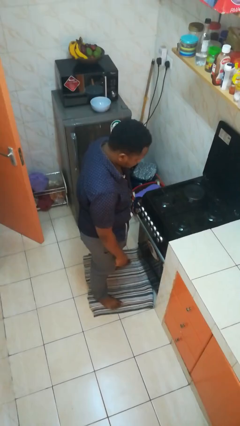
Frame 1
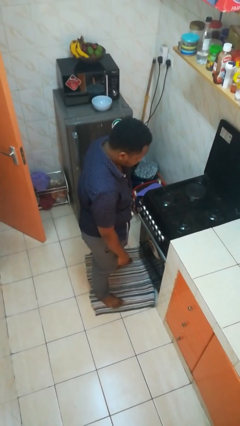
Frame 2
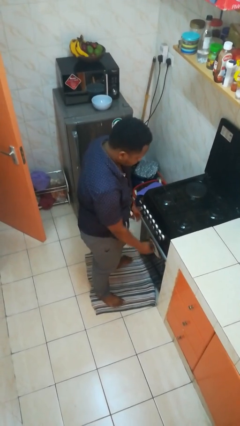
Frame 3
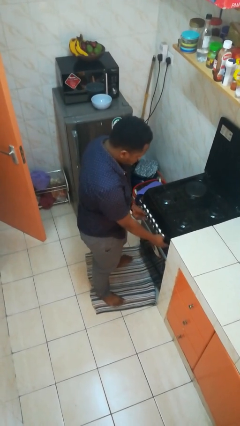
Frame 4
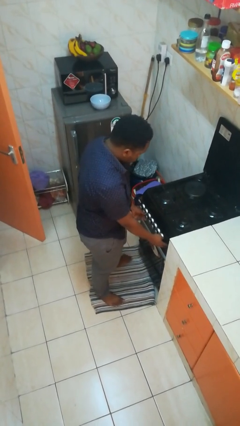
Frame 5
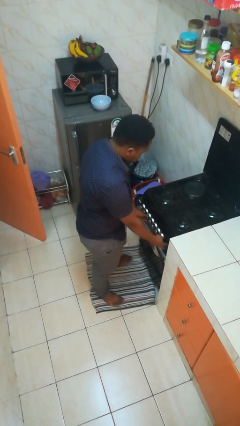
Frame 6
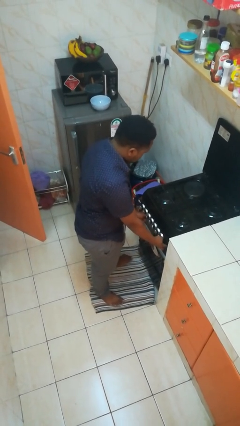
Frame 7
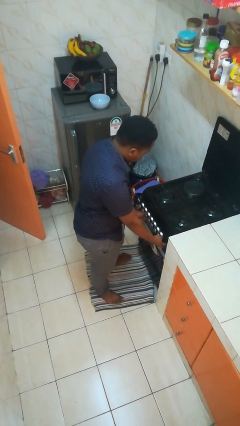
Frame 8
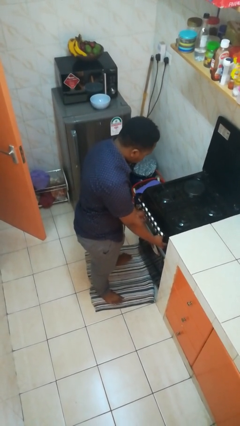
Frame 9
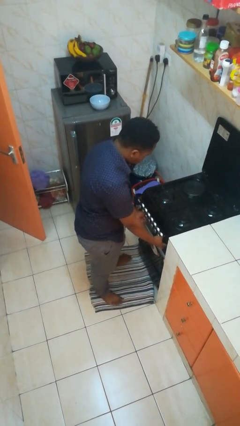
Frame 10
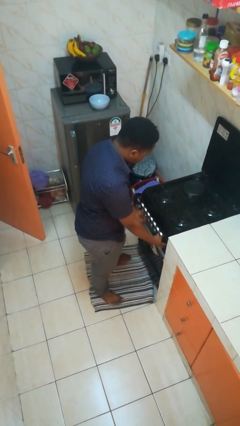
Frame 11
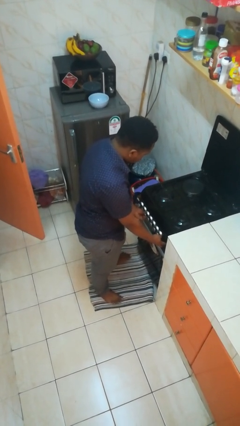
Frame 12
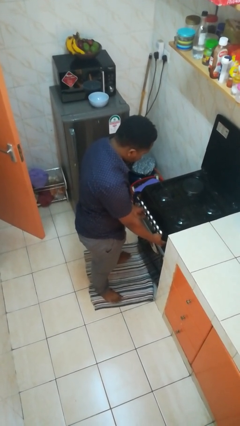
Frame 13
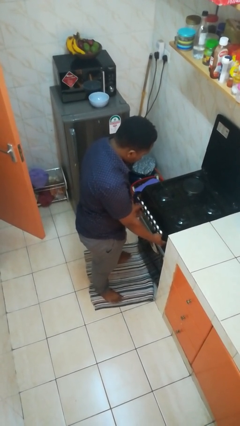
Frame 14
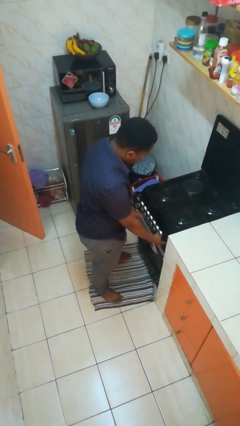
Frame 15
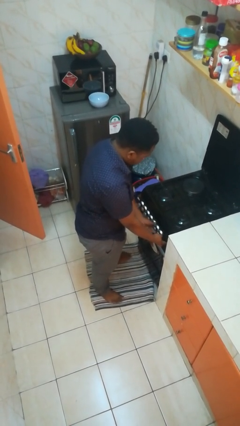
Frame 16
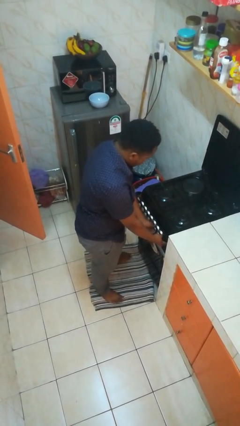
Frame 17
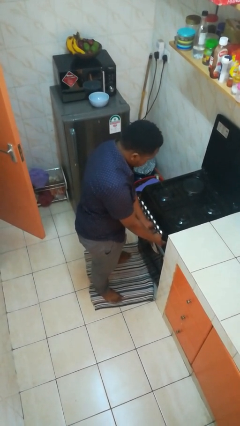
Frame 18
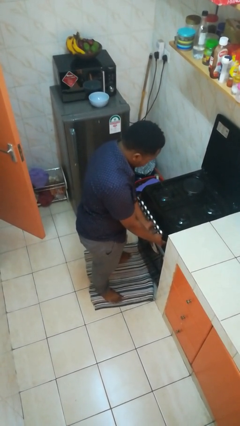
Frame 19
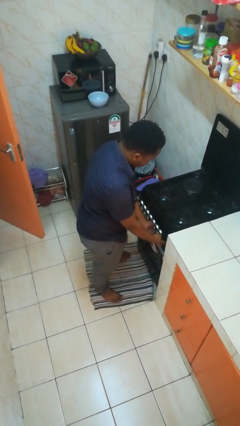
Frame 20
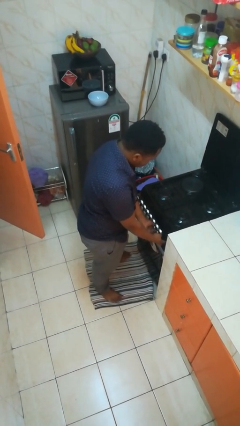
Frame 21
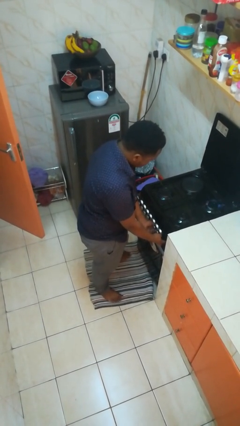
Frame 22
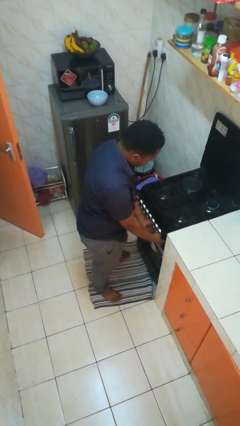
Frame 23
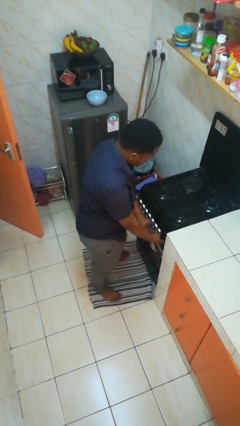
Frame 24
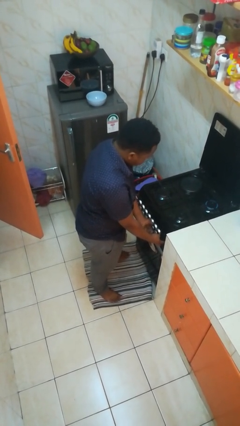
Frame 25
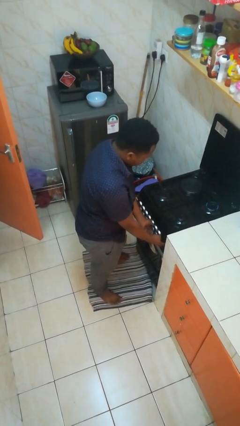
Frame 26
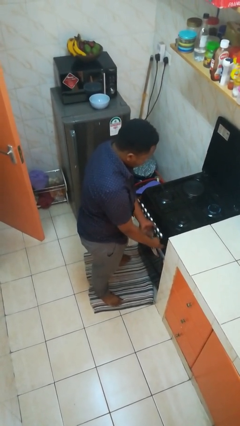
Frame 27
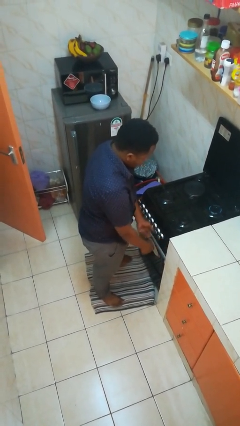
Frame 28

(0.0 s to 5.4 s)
person turns on stovetop

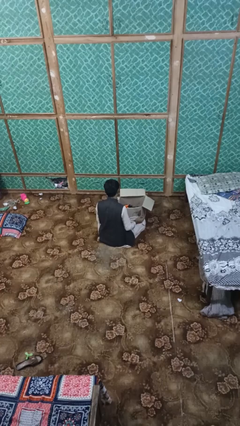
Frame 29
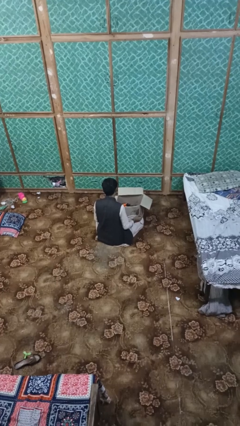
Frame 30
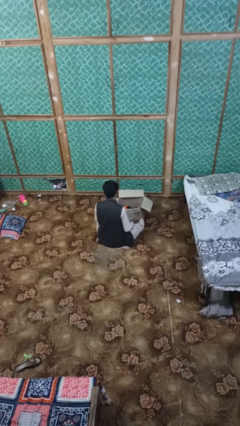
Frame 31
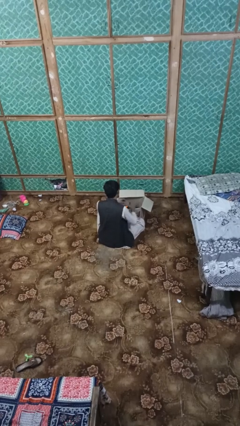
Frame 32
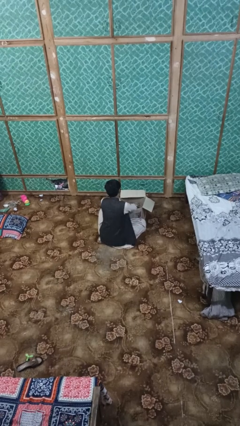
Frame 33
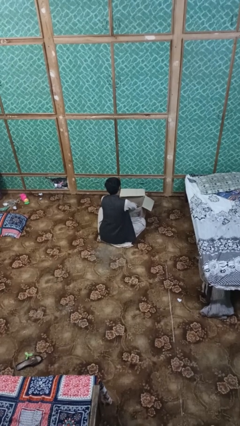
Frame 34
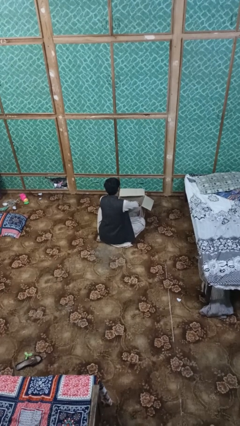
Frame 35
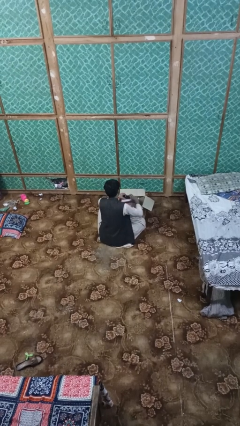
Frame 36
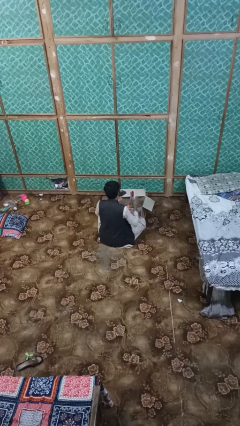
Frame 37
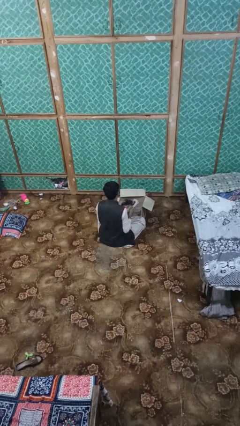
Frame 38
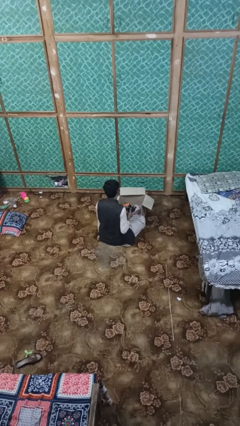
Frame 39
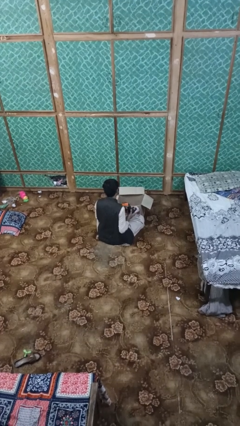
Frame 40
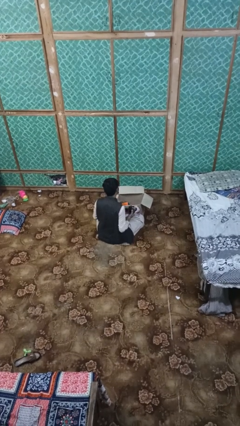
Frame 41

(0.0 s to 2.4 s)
person takes object from box

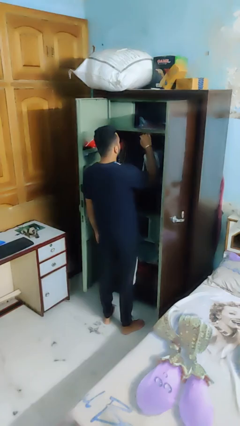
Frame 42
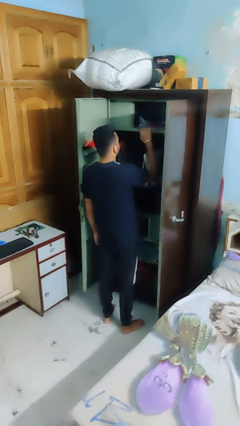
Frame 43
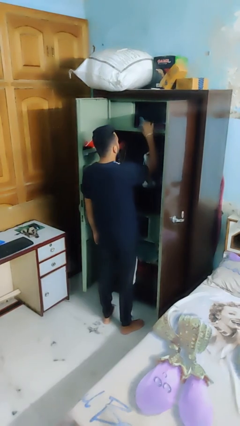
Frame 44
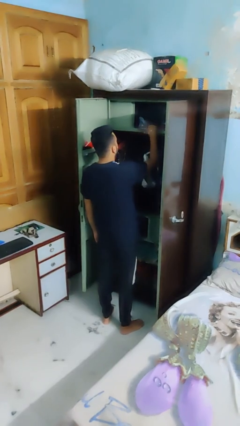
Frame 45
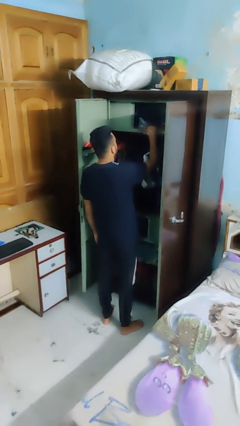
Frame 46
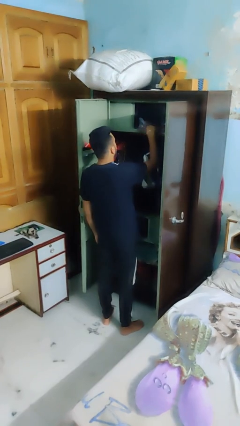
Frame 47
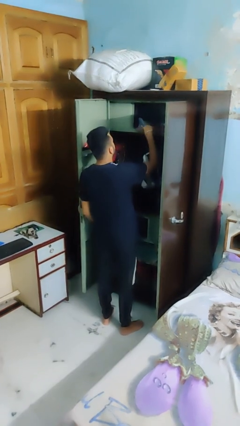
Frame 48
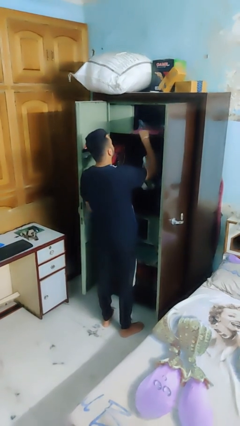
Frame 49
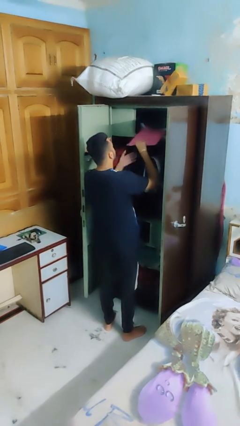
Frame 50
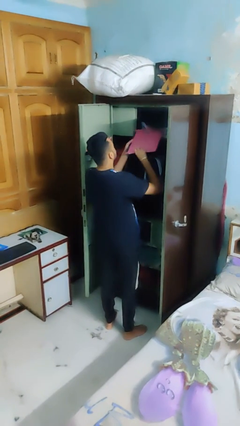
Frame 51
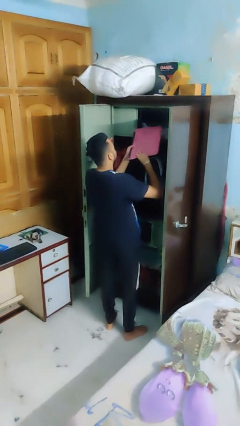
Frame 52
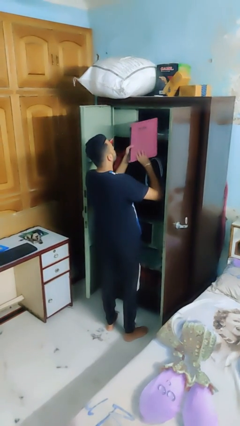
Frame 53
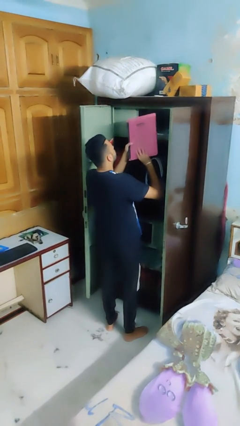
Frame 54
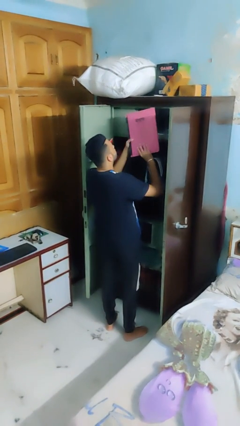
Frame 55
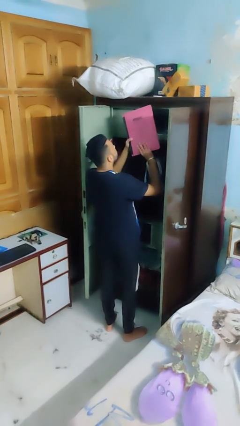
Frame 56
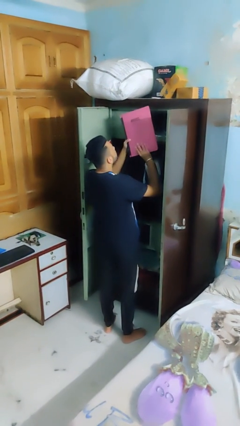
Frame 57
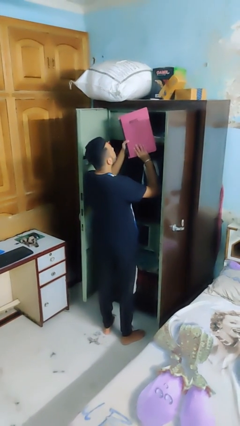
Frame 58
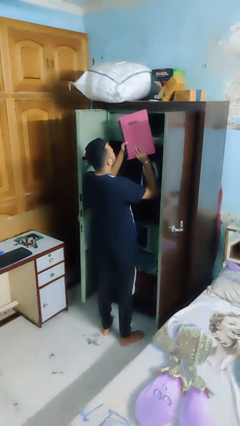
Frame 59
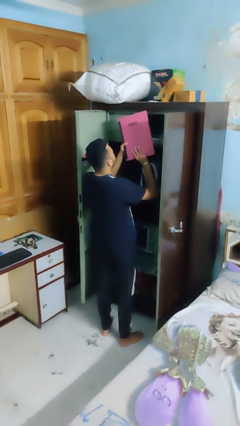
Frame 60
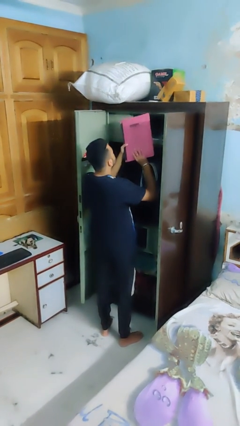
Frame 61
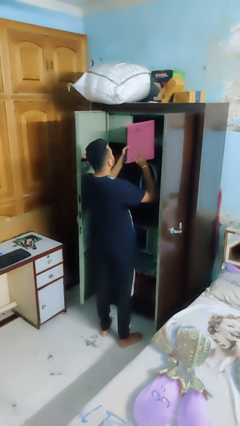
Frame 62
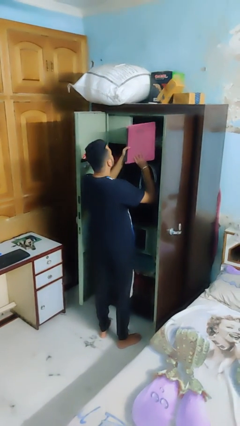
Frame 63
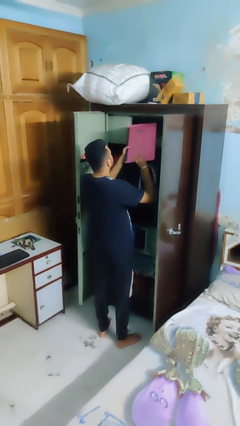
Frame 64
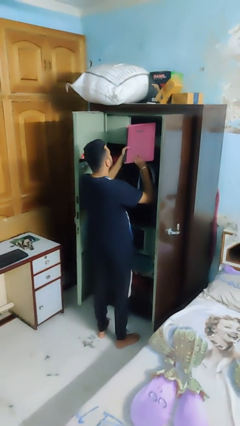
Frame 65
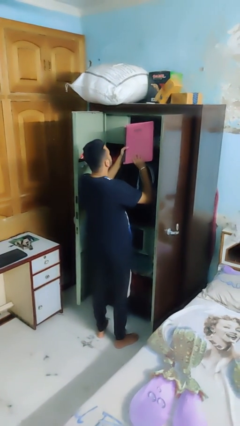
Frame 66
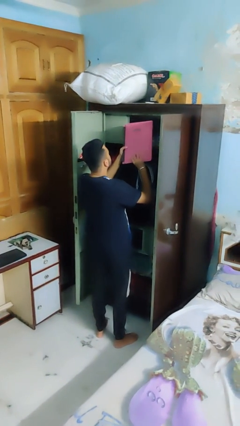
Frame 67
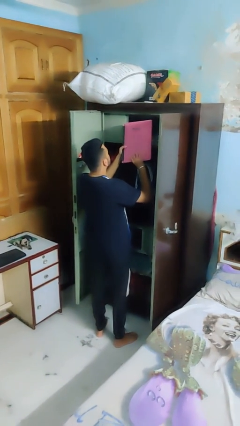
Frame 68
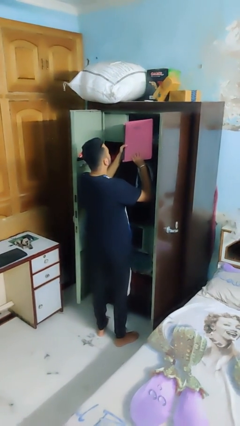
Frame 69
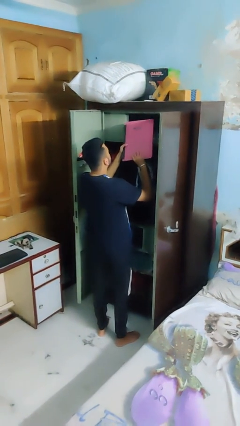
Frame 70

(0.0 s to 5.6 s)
person picks up object from shelf

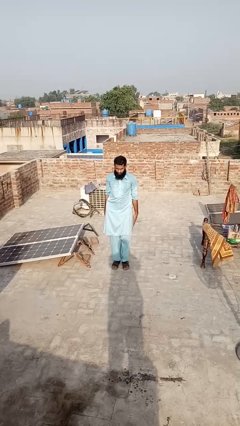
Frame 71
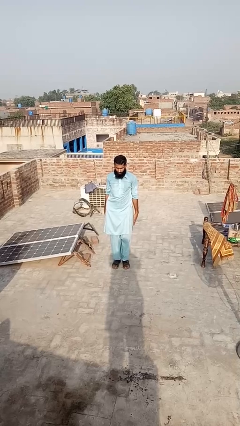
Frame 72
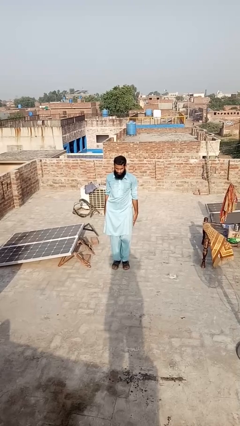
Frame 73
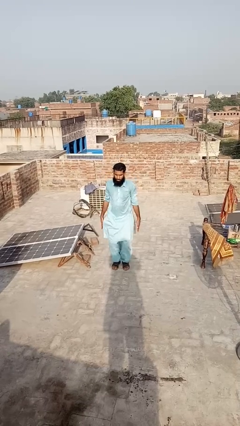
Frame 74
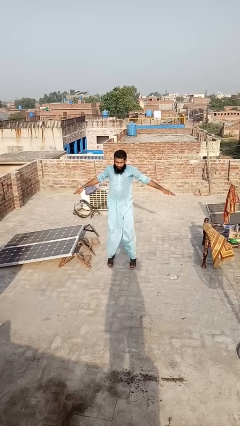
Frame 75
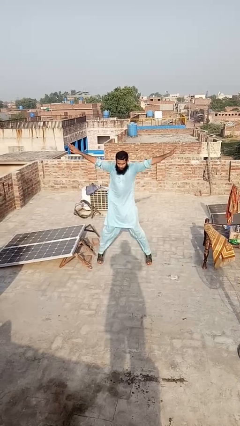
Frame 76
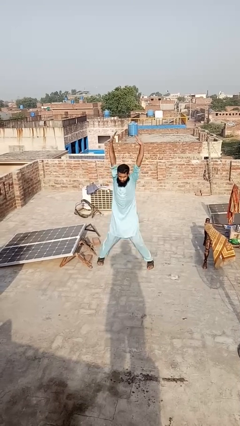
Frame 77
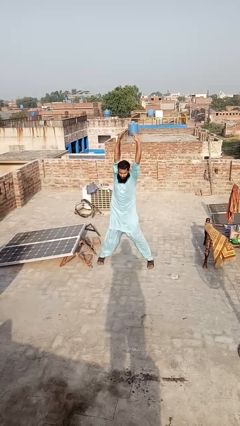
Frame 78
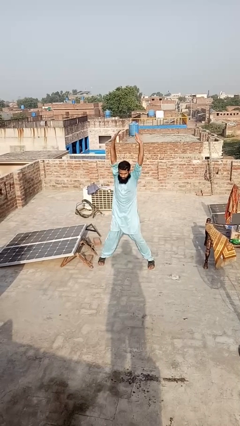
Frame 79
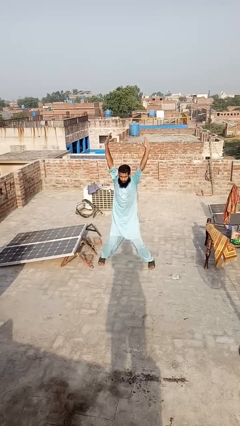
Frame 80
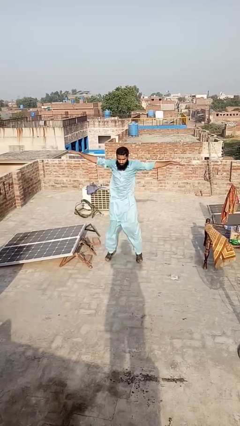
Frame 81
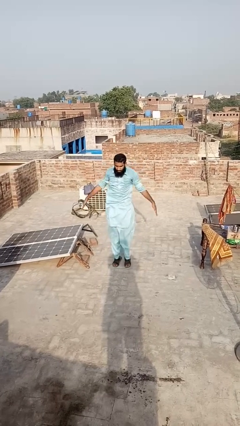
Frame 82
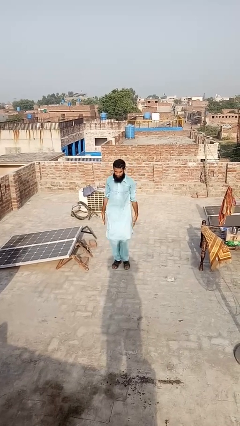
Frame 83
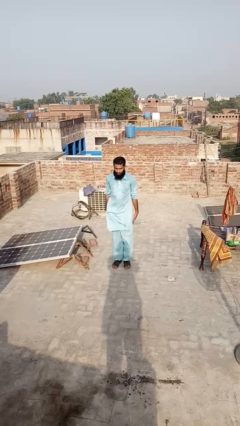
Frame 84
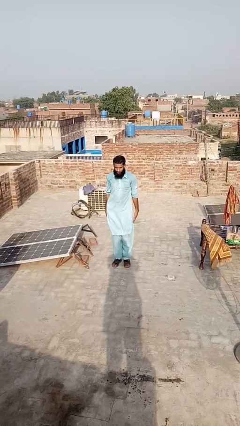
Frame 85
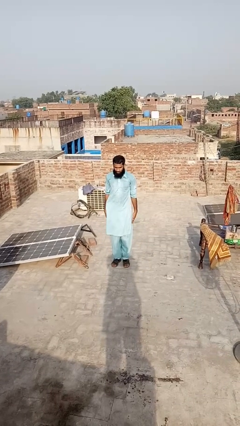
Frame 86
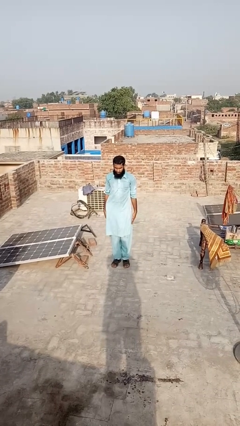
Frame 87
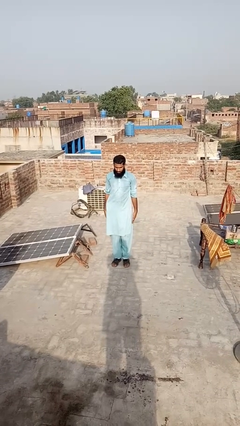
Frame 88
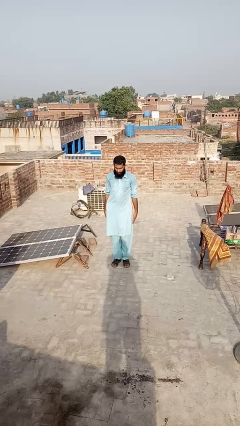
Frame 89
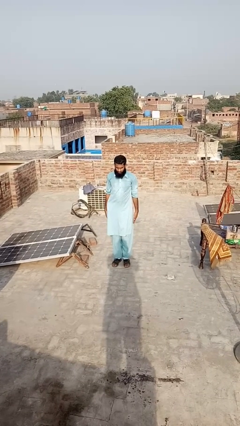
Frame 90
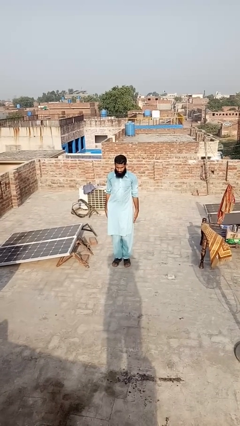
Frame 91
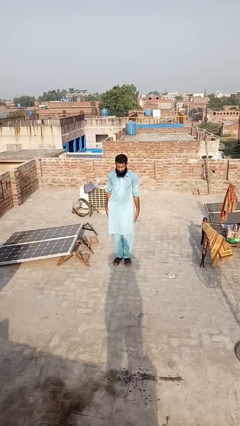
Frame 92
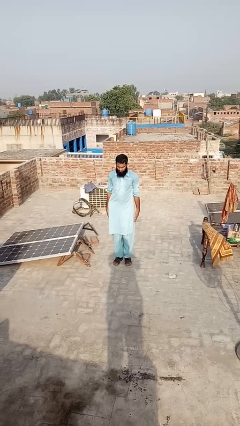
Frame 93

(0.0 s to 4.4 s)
person exercises with jumping jacks
